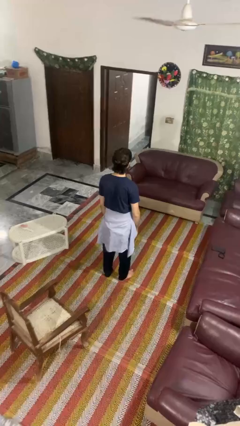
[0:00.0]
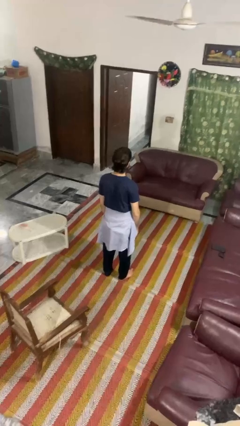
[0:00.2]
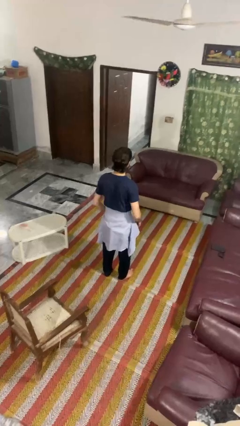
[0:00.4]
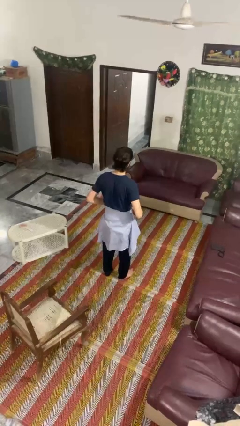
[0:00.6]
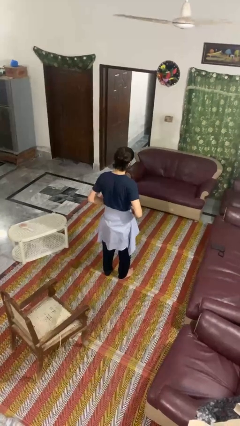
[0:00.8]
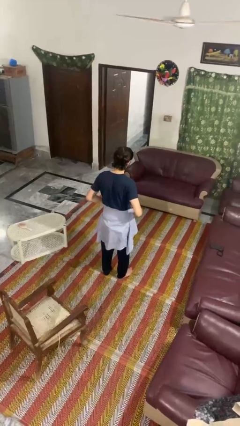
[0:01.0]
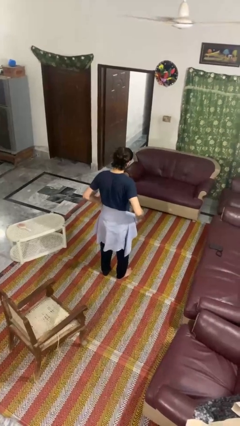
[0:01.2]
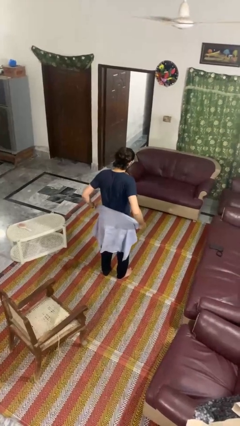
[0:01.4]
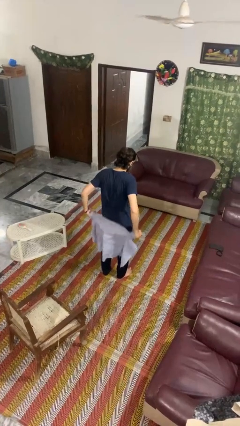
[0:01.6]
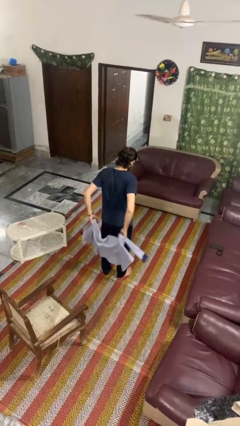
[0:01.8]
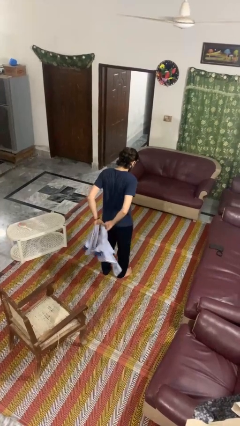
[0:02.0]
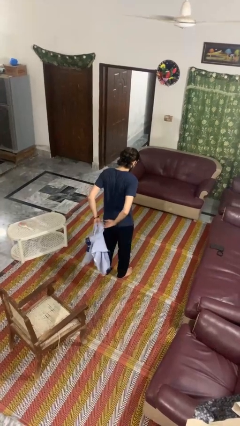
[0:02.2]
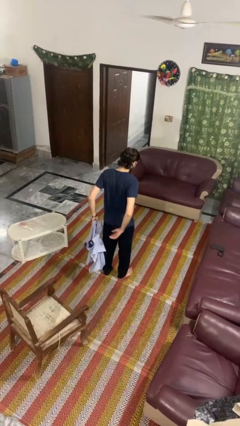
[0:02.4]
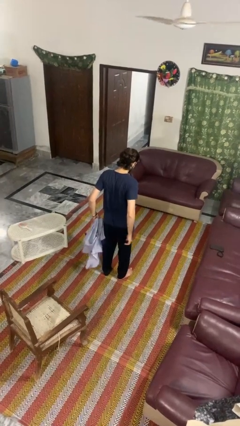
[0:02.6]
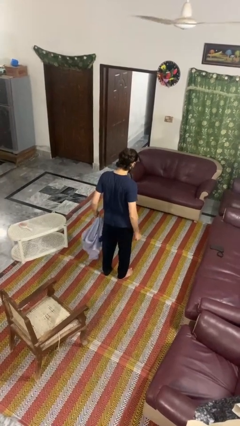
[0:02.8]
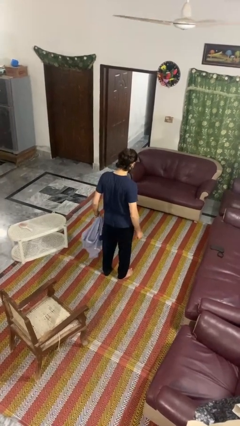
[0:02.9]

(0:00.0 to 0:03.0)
person unties jacket around waist

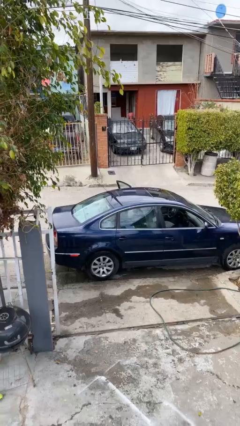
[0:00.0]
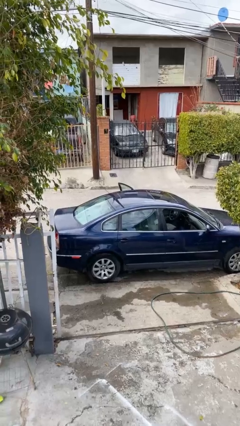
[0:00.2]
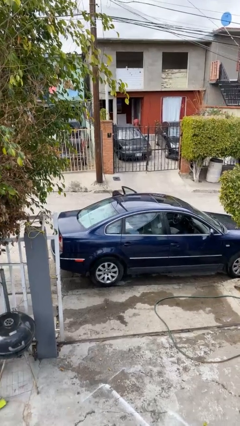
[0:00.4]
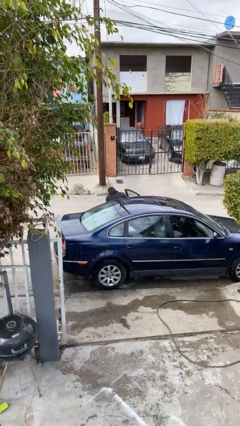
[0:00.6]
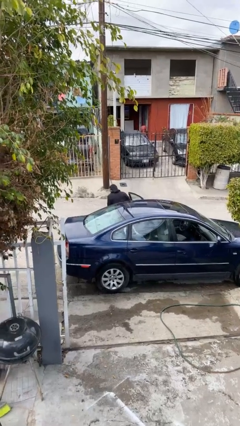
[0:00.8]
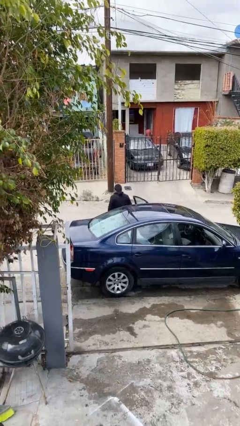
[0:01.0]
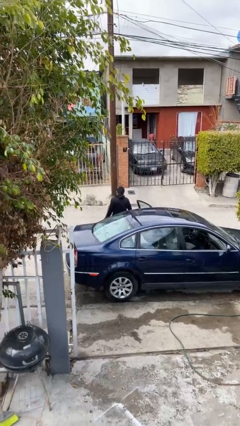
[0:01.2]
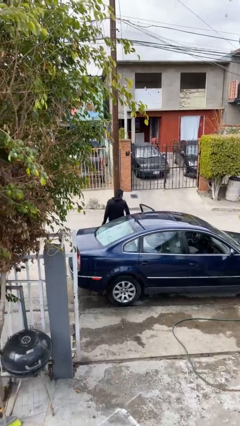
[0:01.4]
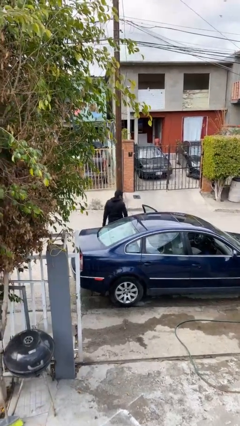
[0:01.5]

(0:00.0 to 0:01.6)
person exits car

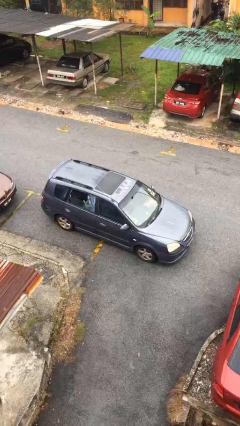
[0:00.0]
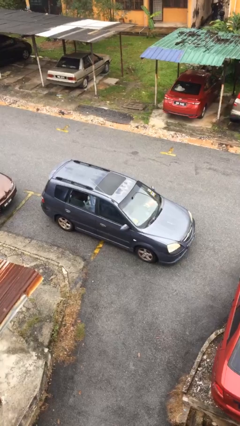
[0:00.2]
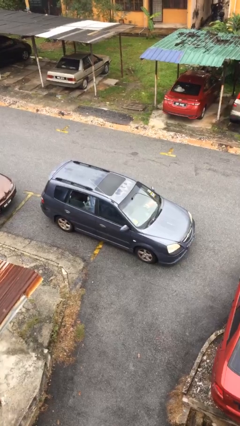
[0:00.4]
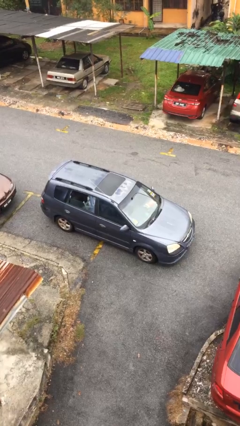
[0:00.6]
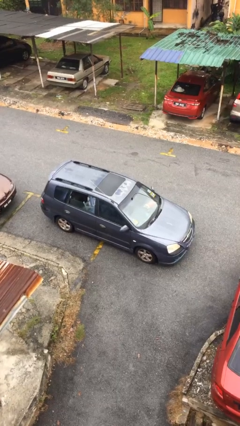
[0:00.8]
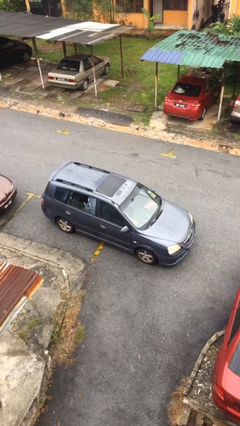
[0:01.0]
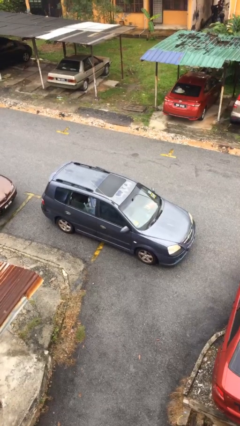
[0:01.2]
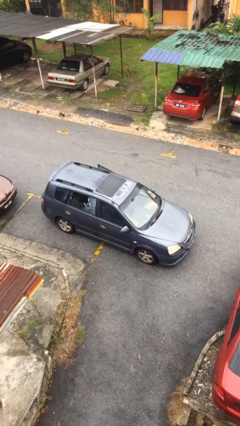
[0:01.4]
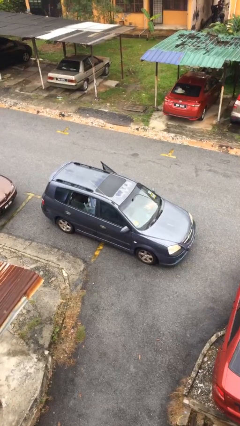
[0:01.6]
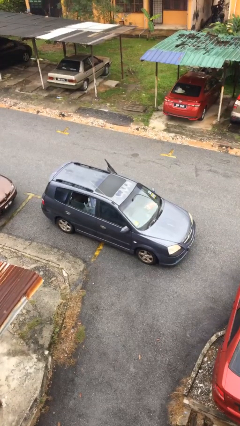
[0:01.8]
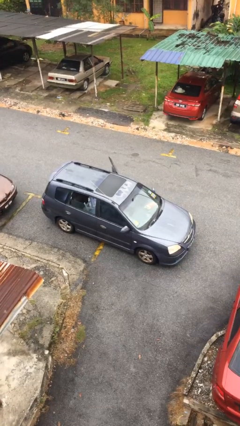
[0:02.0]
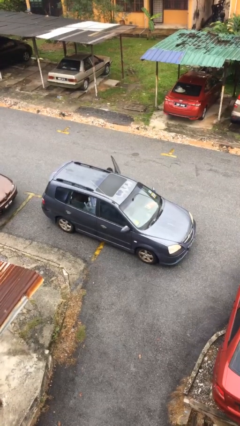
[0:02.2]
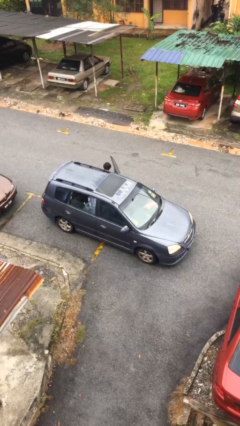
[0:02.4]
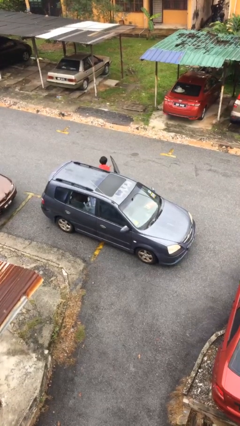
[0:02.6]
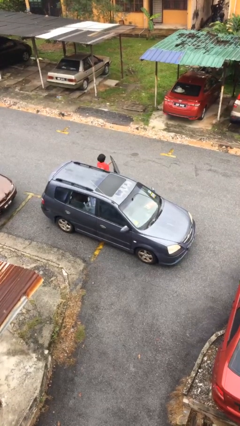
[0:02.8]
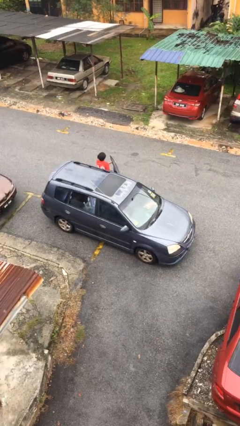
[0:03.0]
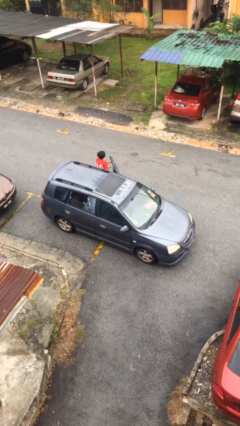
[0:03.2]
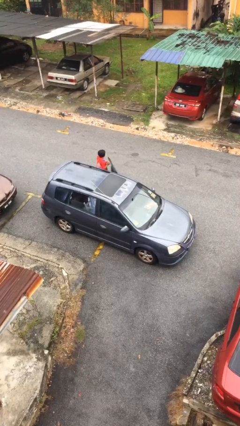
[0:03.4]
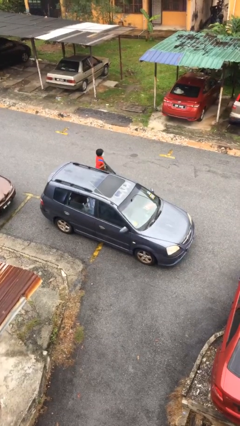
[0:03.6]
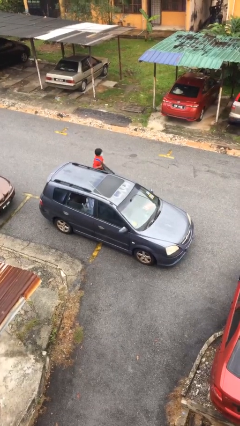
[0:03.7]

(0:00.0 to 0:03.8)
car drops off person

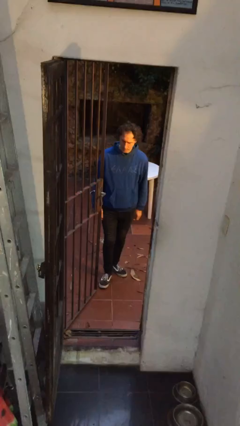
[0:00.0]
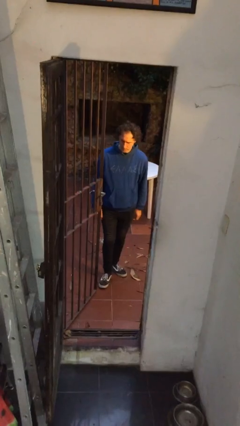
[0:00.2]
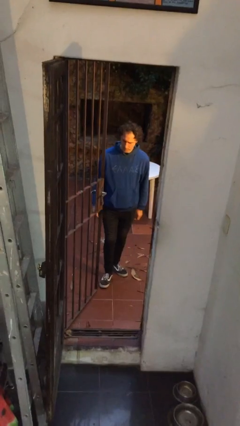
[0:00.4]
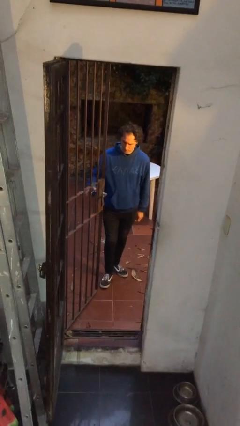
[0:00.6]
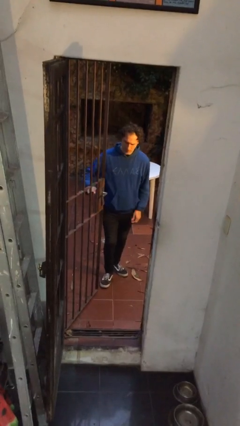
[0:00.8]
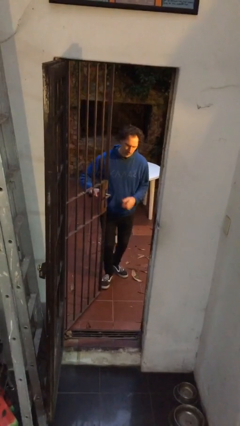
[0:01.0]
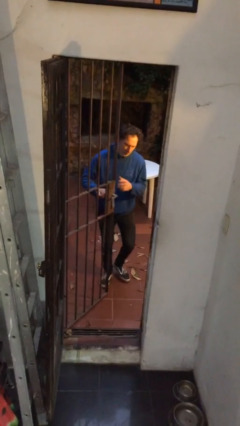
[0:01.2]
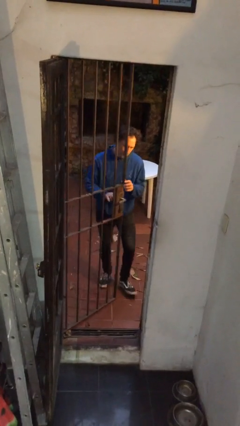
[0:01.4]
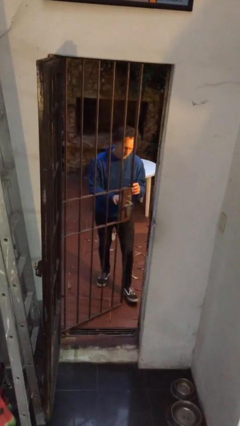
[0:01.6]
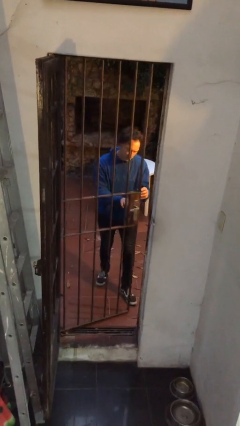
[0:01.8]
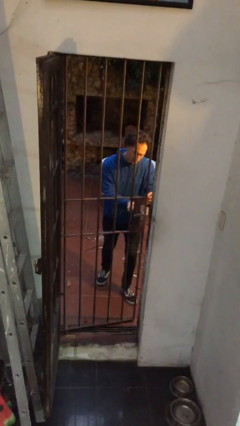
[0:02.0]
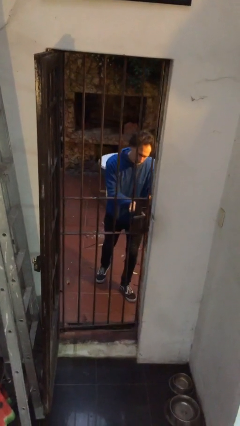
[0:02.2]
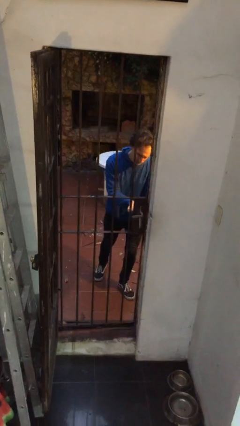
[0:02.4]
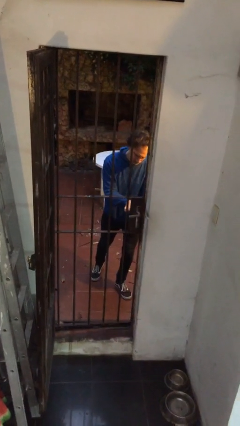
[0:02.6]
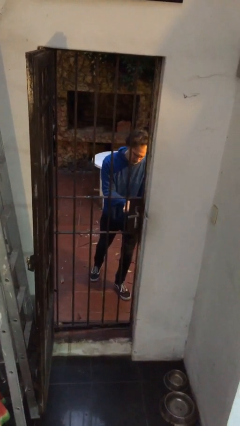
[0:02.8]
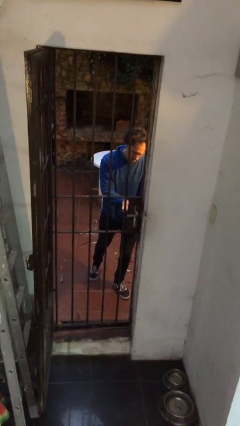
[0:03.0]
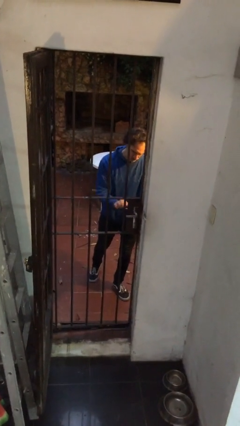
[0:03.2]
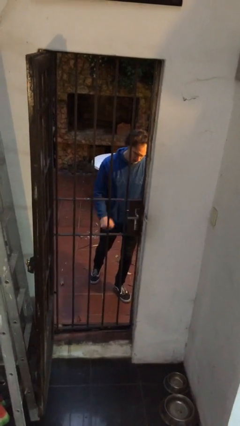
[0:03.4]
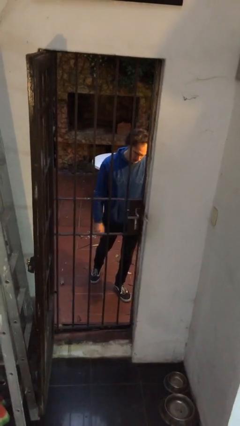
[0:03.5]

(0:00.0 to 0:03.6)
person closes gate

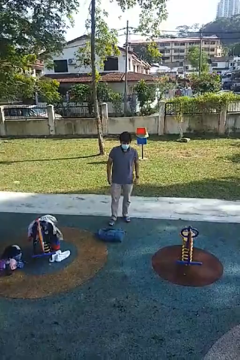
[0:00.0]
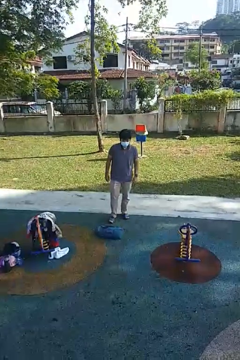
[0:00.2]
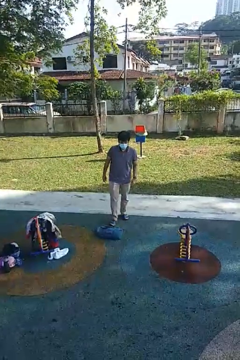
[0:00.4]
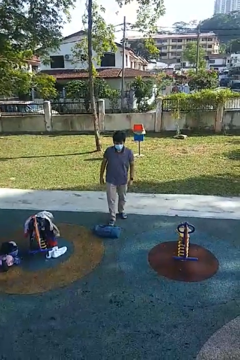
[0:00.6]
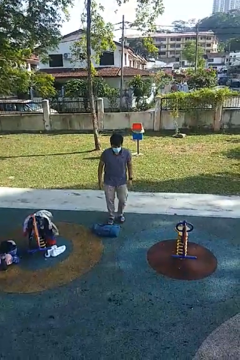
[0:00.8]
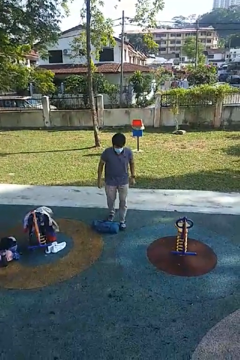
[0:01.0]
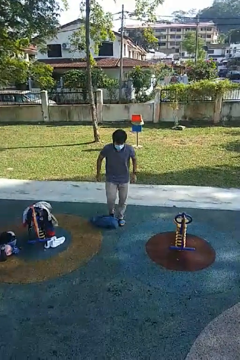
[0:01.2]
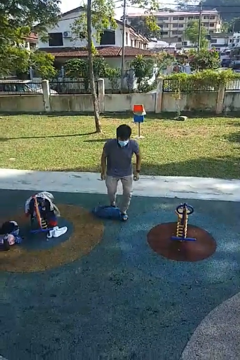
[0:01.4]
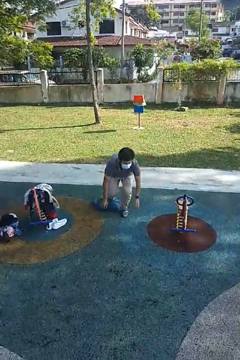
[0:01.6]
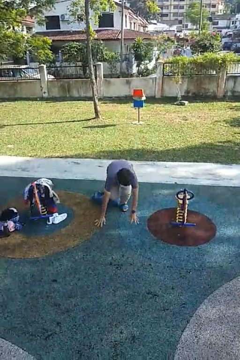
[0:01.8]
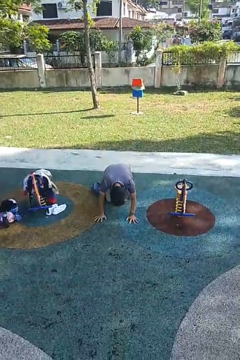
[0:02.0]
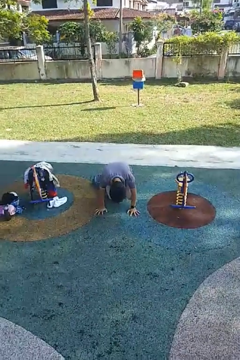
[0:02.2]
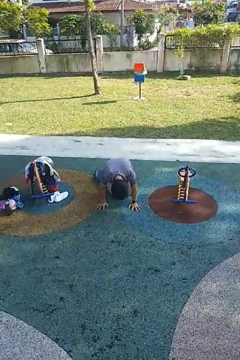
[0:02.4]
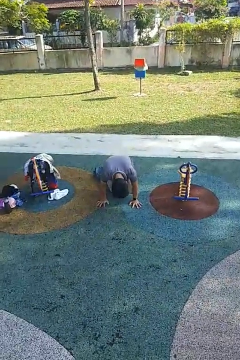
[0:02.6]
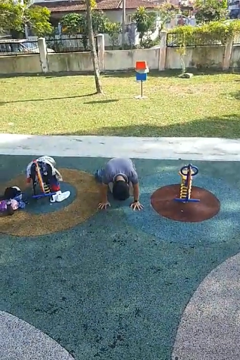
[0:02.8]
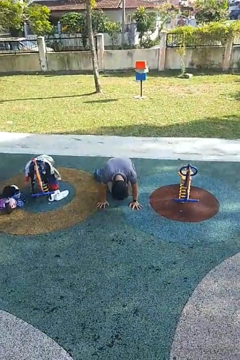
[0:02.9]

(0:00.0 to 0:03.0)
person trips on object on floor

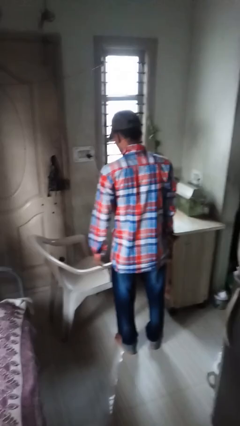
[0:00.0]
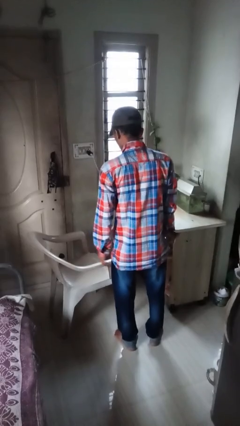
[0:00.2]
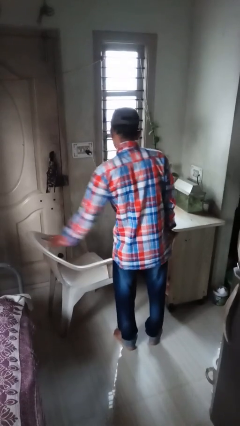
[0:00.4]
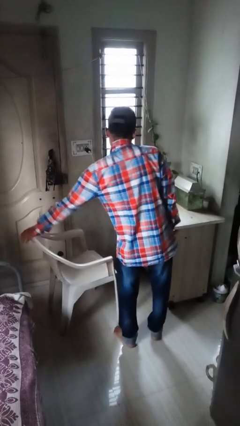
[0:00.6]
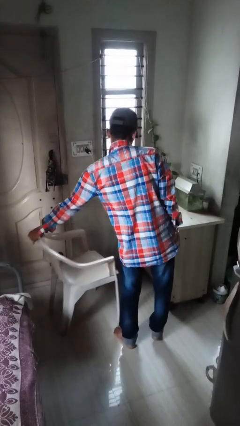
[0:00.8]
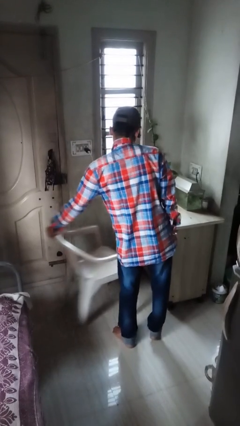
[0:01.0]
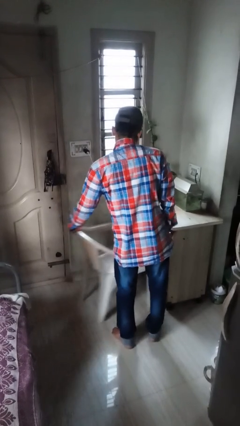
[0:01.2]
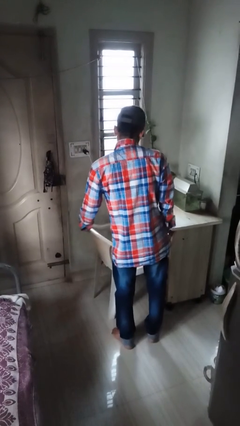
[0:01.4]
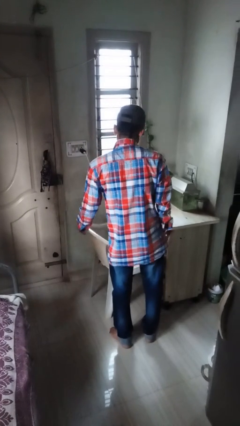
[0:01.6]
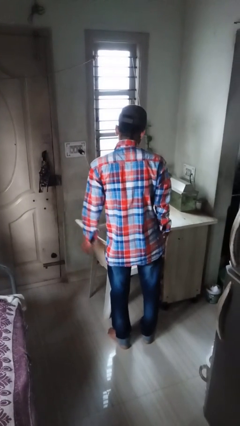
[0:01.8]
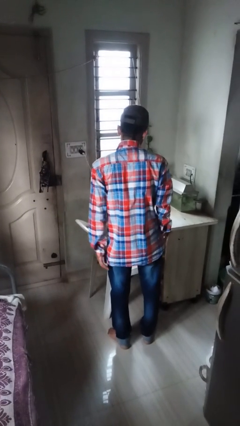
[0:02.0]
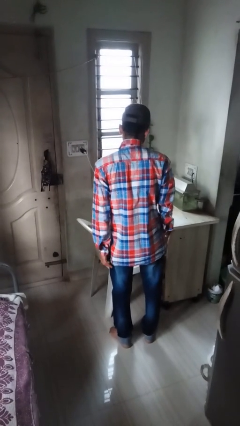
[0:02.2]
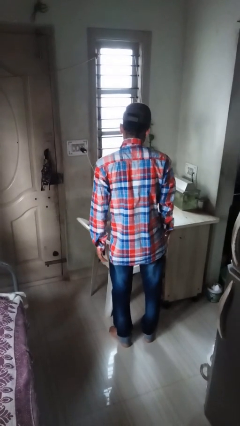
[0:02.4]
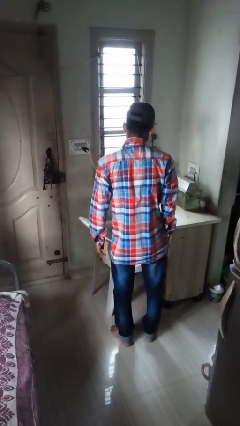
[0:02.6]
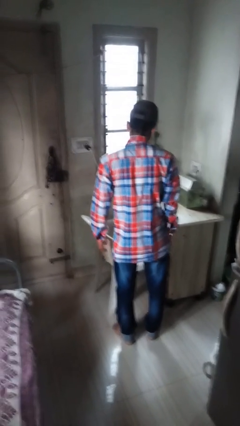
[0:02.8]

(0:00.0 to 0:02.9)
person pushes in chair

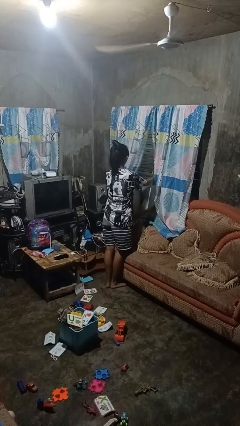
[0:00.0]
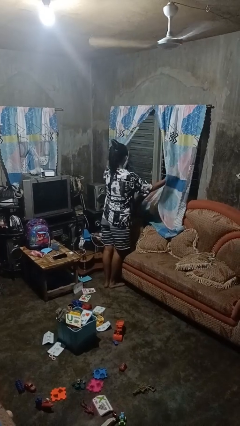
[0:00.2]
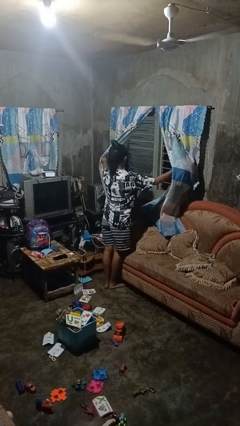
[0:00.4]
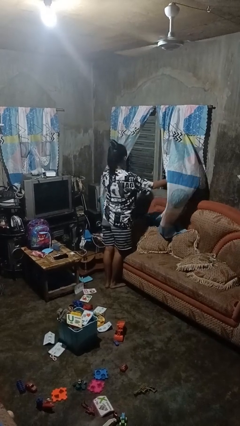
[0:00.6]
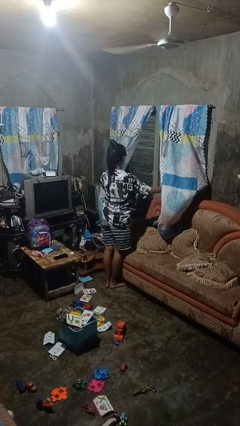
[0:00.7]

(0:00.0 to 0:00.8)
person opens curtains
